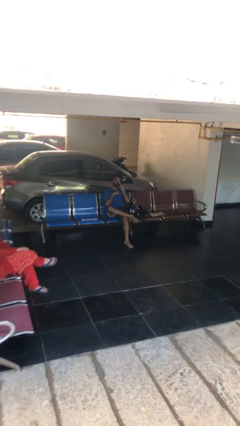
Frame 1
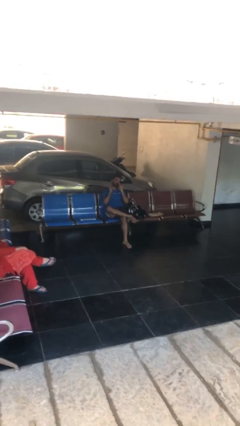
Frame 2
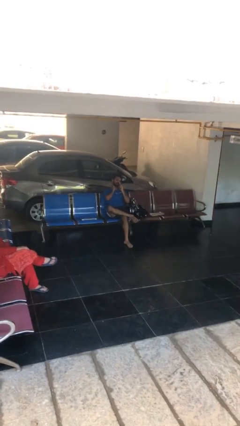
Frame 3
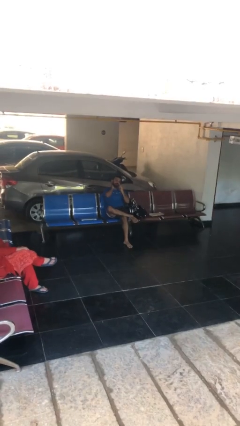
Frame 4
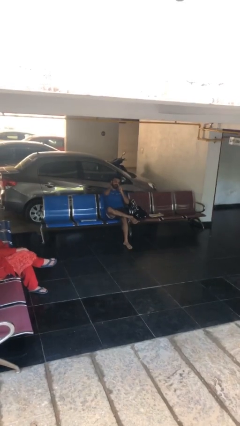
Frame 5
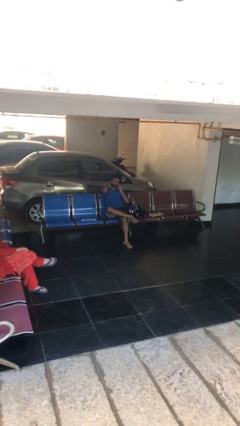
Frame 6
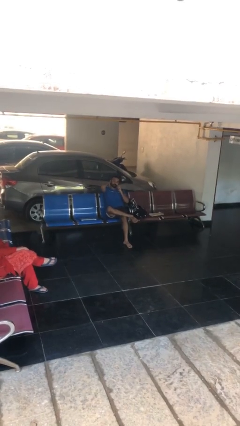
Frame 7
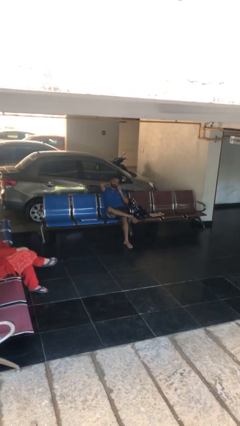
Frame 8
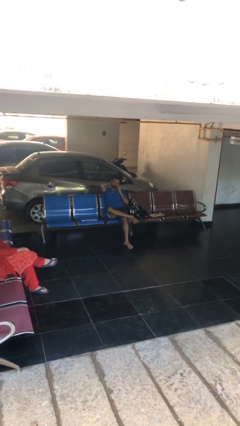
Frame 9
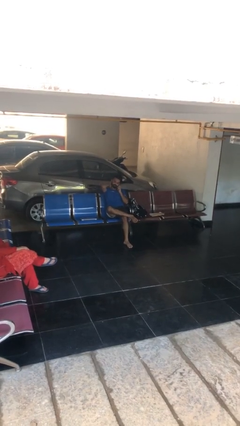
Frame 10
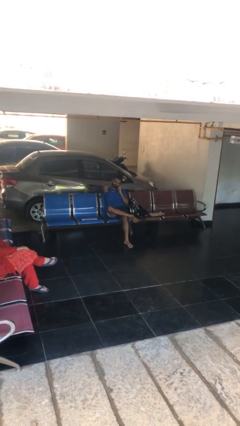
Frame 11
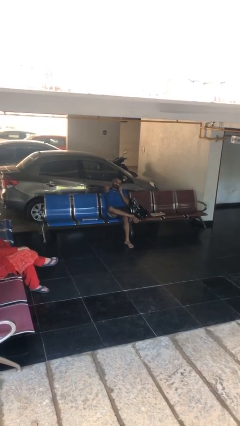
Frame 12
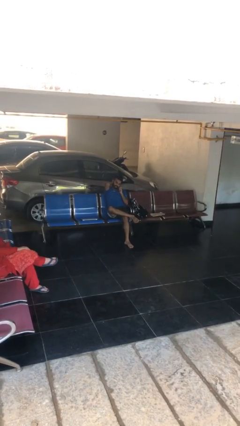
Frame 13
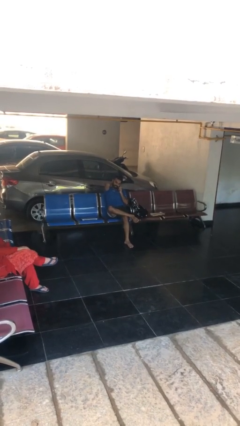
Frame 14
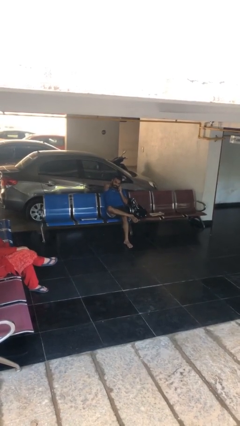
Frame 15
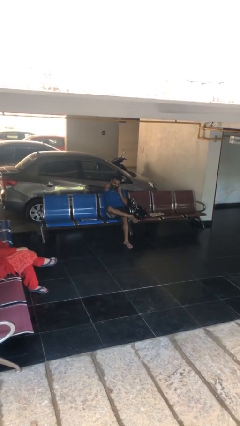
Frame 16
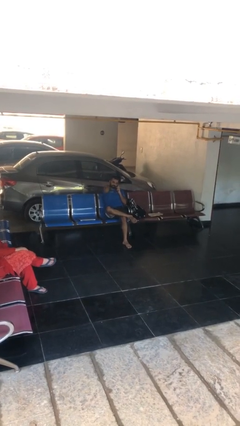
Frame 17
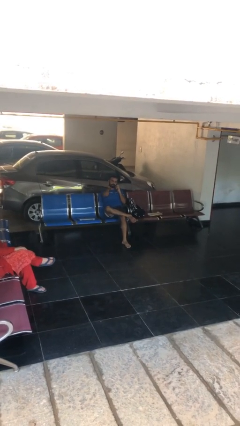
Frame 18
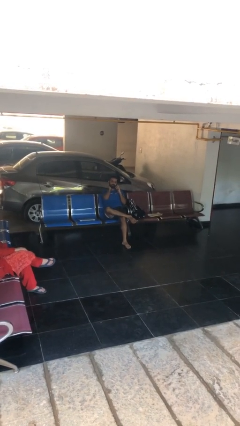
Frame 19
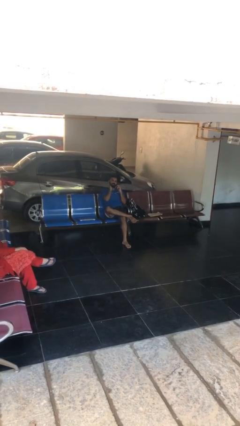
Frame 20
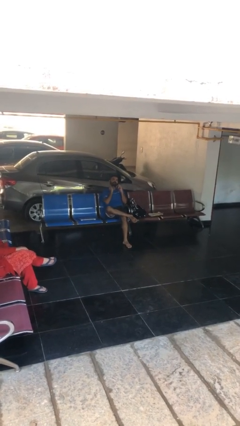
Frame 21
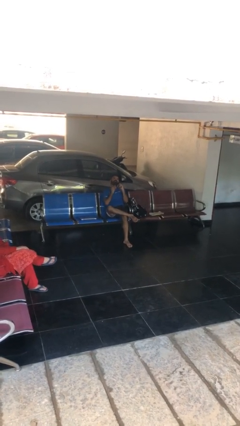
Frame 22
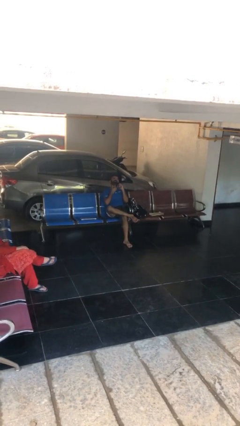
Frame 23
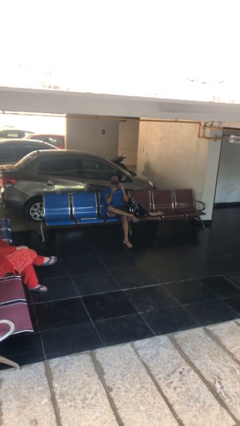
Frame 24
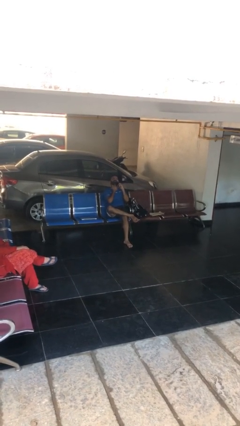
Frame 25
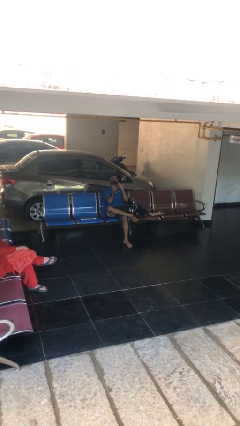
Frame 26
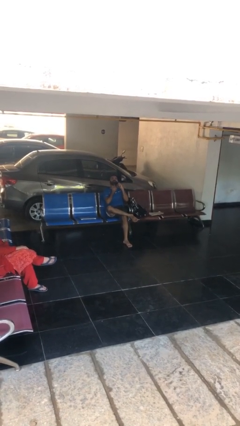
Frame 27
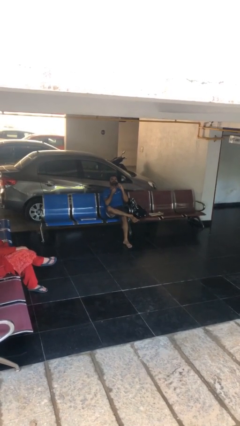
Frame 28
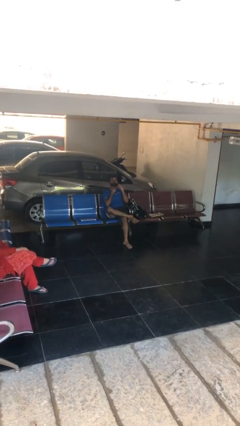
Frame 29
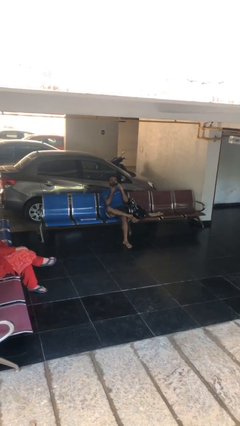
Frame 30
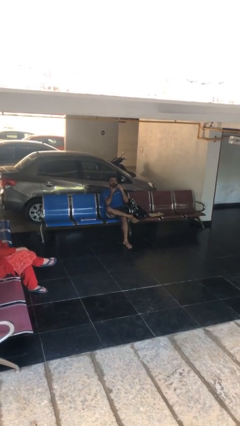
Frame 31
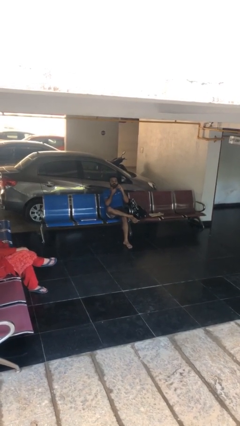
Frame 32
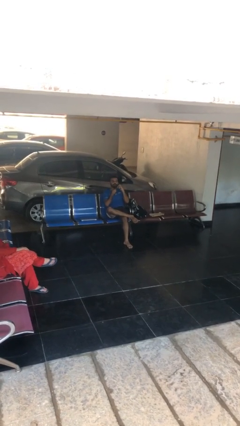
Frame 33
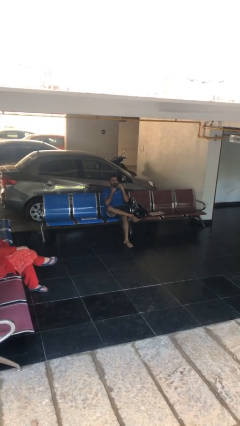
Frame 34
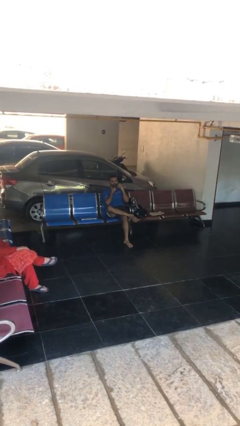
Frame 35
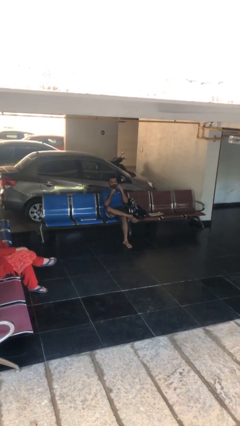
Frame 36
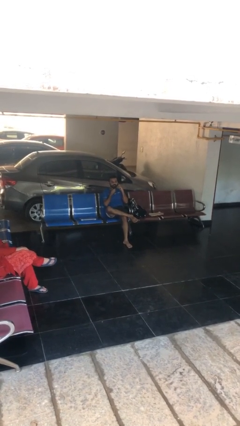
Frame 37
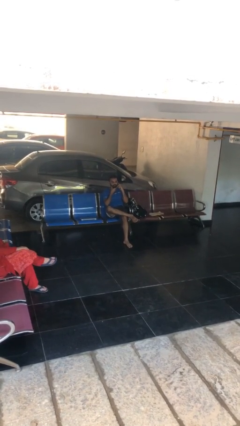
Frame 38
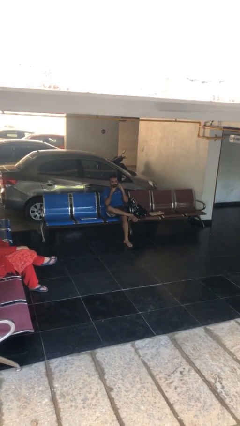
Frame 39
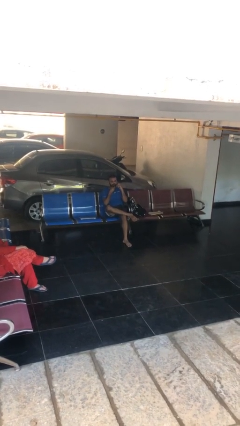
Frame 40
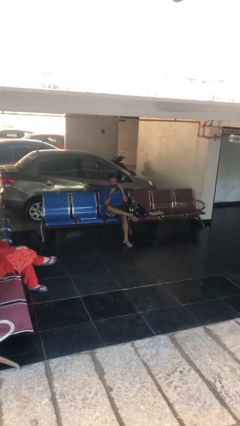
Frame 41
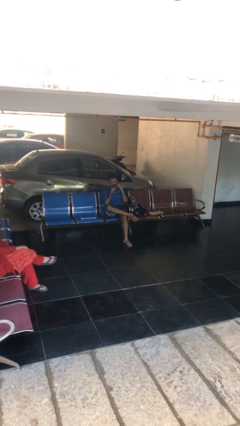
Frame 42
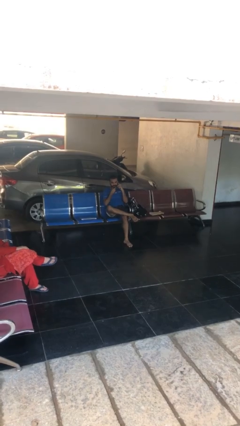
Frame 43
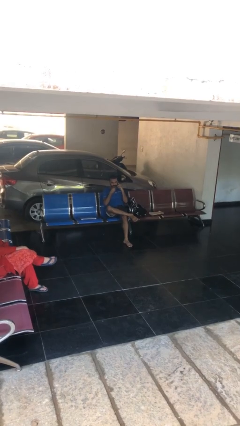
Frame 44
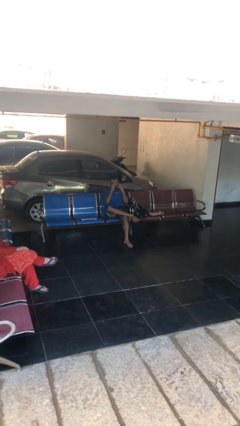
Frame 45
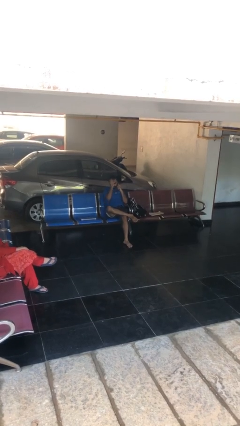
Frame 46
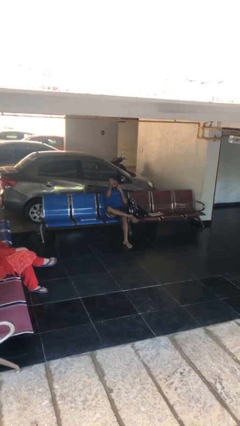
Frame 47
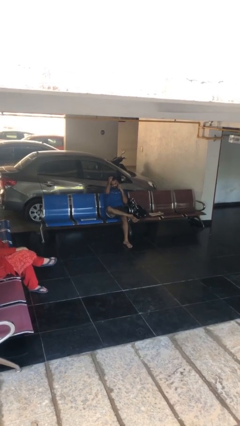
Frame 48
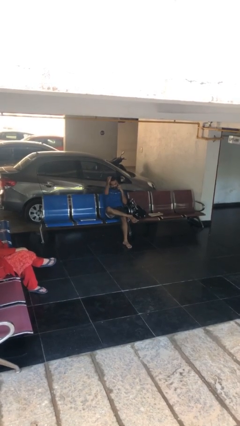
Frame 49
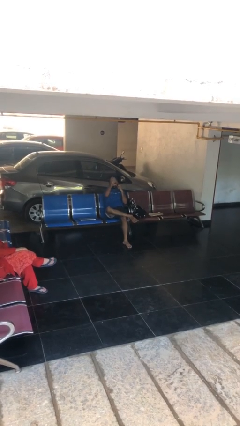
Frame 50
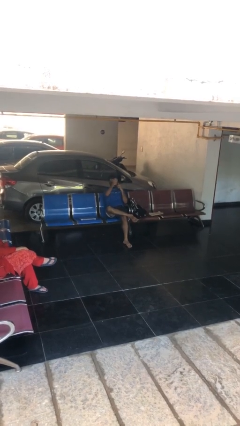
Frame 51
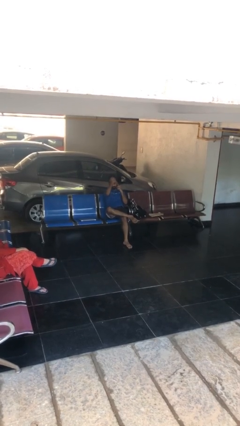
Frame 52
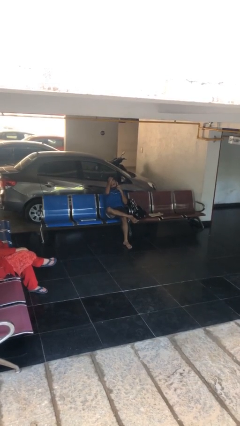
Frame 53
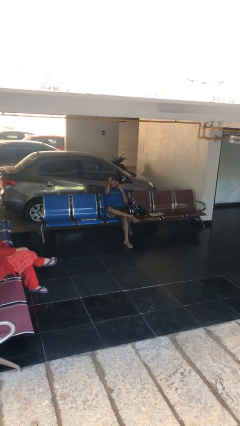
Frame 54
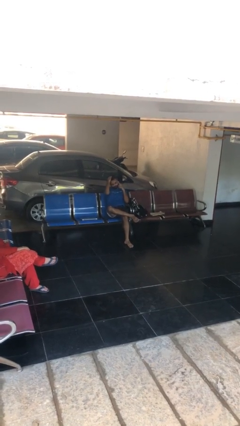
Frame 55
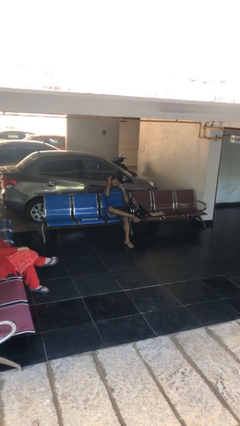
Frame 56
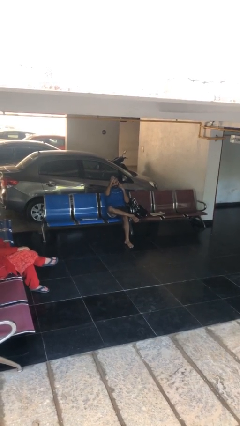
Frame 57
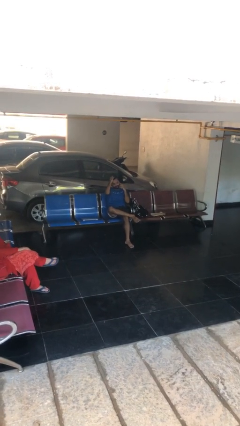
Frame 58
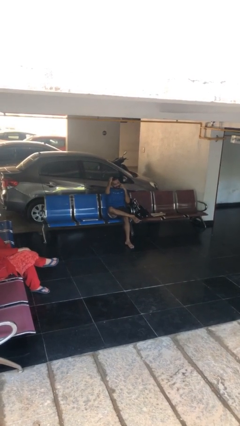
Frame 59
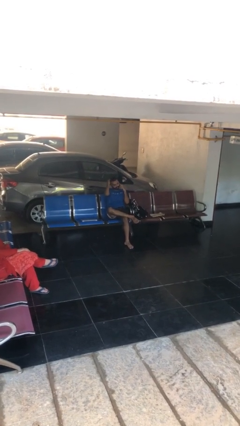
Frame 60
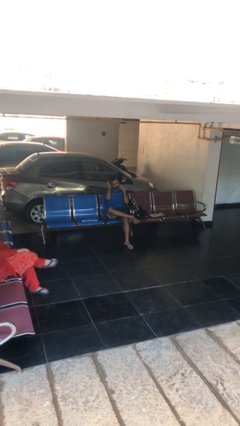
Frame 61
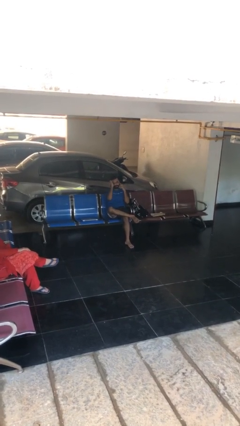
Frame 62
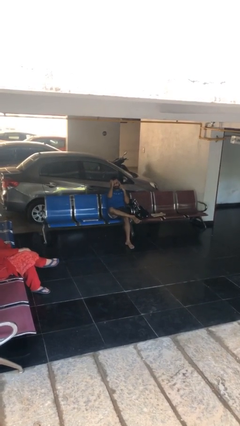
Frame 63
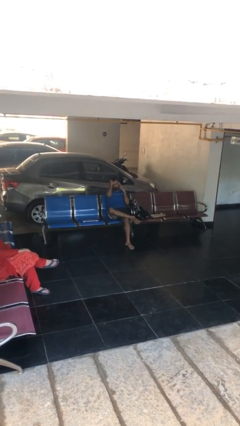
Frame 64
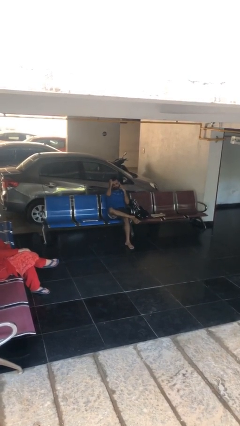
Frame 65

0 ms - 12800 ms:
person talks on phone

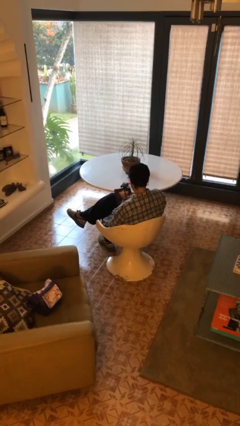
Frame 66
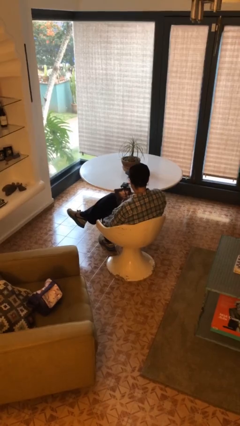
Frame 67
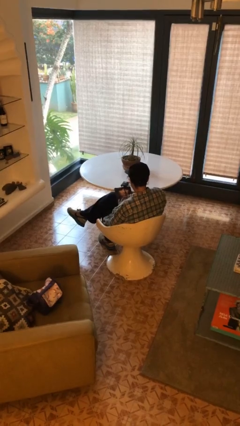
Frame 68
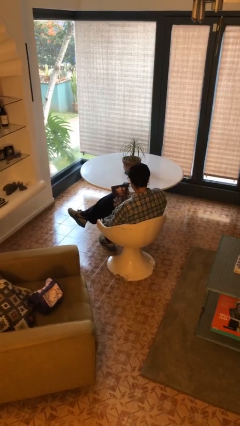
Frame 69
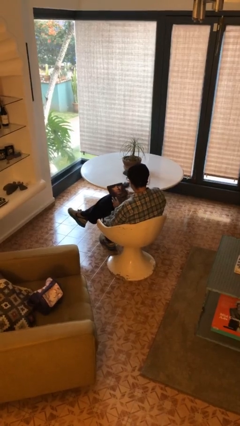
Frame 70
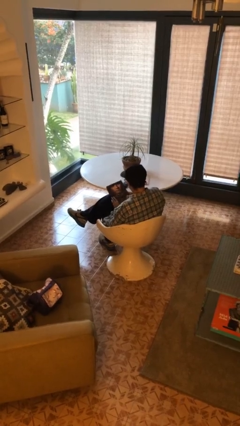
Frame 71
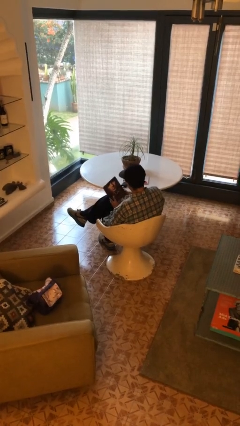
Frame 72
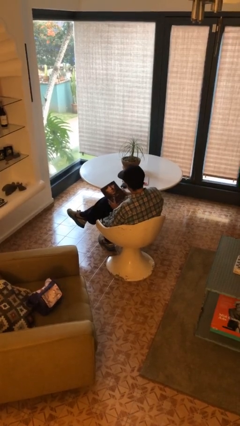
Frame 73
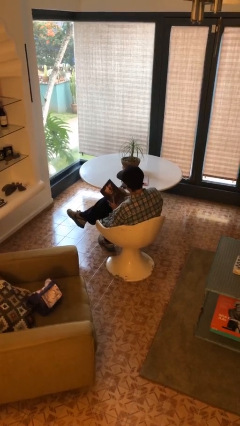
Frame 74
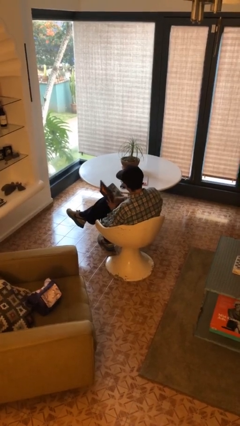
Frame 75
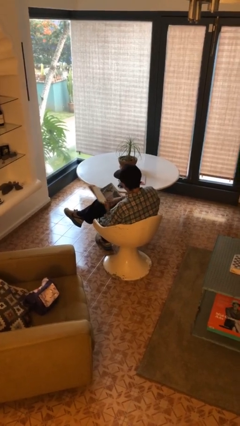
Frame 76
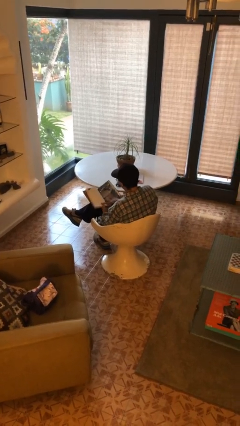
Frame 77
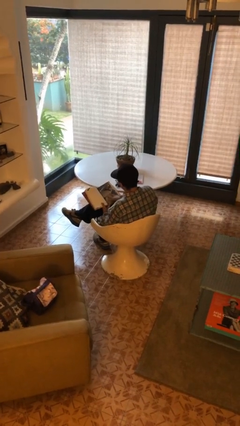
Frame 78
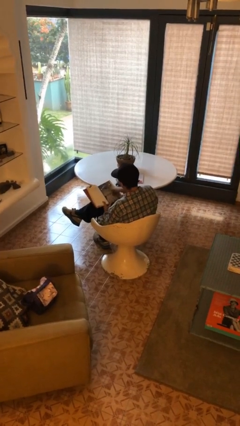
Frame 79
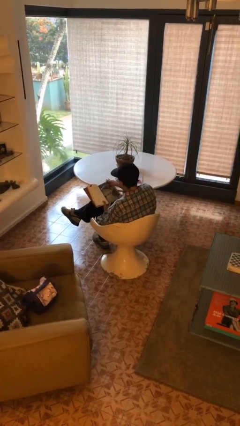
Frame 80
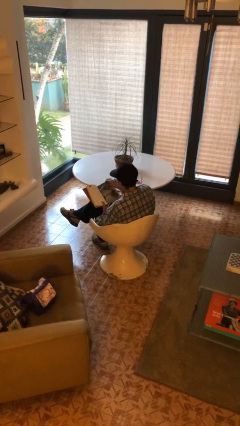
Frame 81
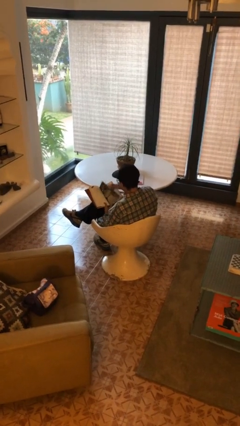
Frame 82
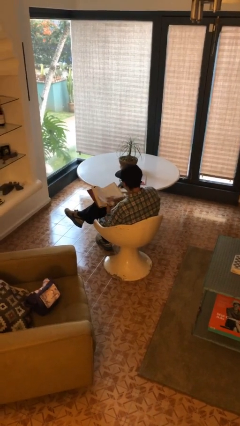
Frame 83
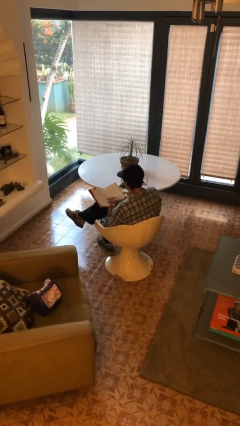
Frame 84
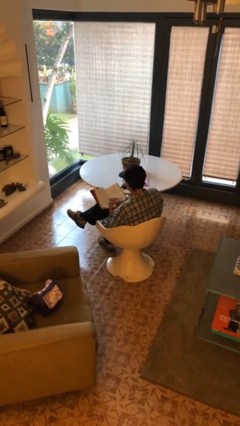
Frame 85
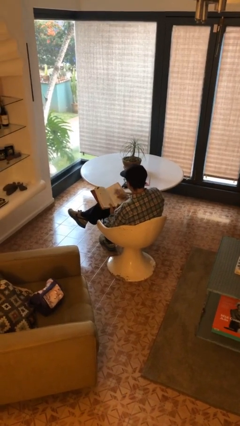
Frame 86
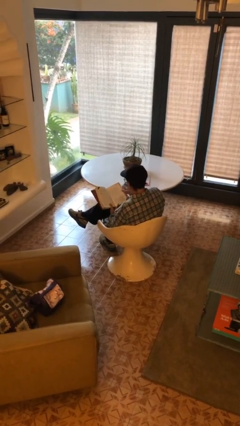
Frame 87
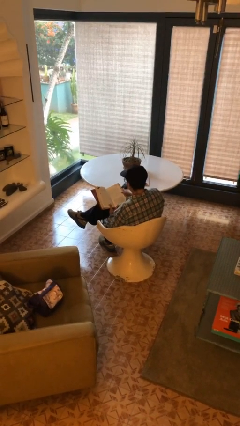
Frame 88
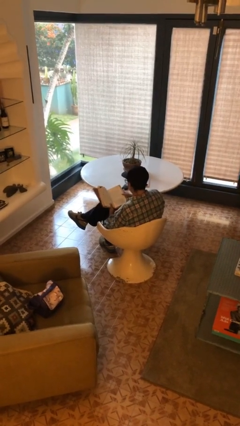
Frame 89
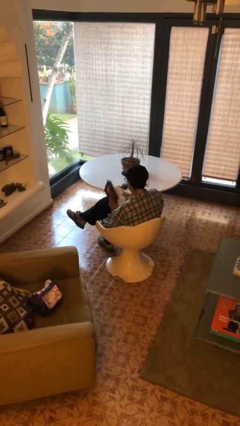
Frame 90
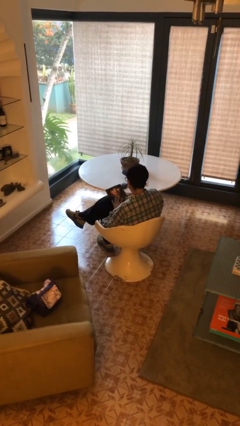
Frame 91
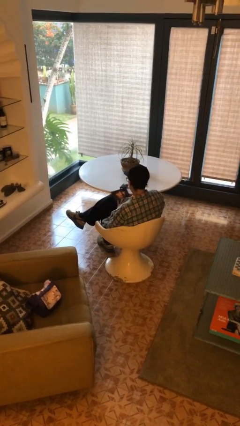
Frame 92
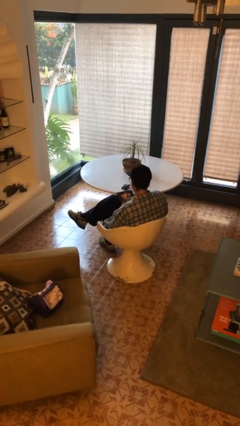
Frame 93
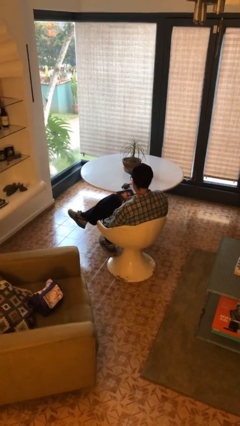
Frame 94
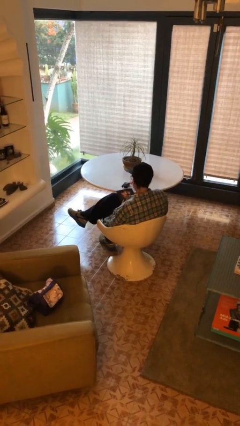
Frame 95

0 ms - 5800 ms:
person reads book
